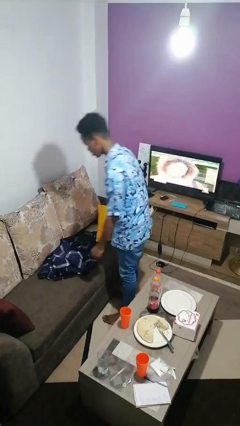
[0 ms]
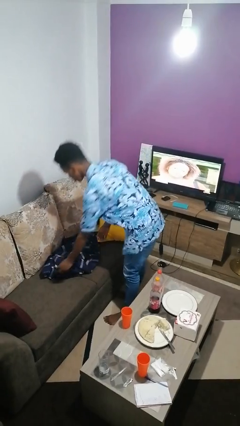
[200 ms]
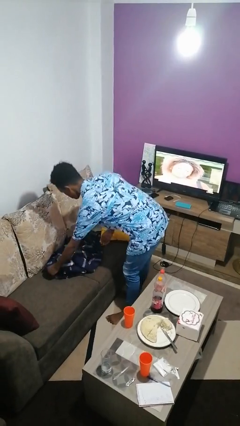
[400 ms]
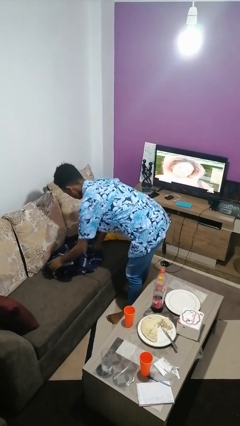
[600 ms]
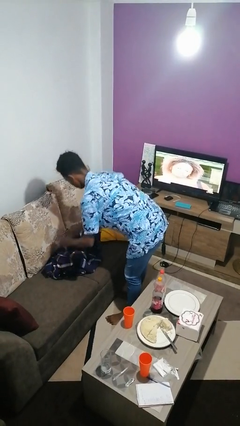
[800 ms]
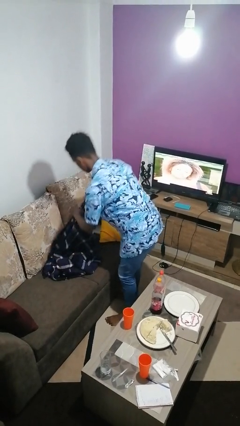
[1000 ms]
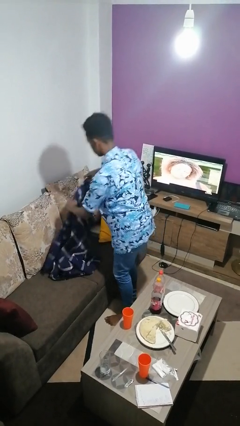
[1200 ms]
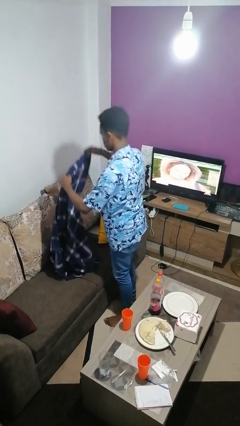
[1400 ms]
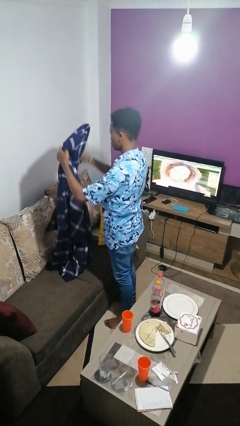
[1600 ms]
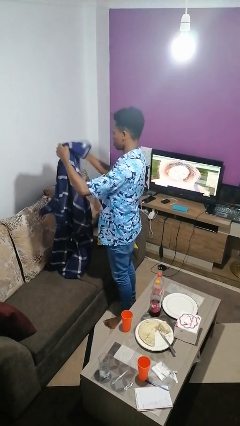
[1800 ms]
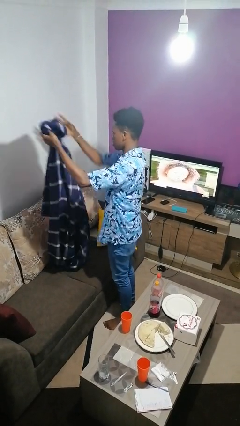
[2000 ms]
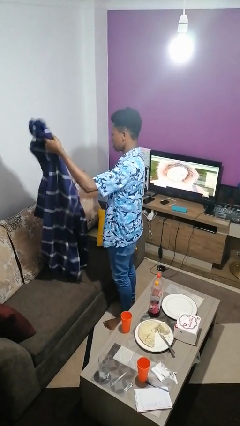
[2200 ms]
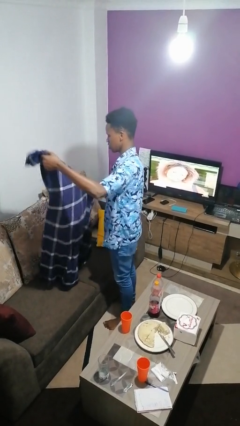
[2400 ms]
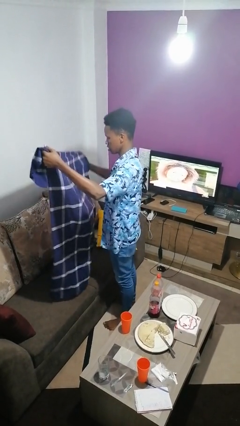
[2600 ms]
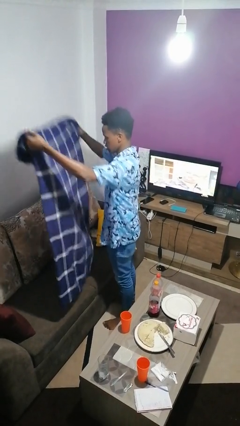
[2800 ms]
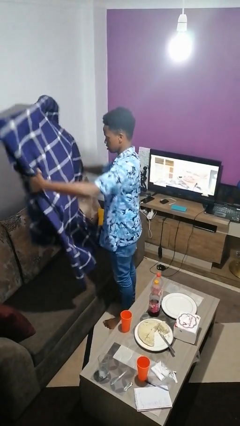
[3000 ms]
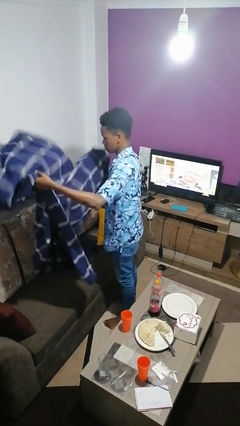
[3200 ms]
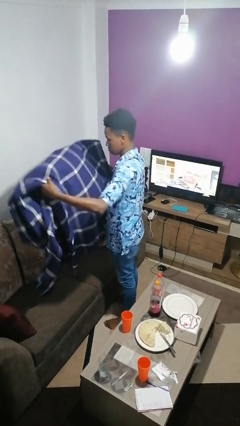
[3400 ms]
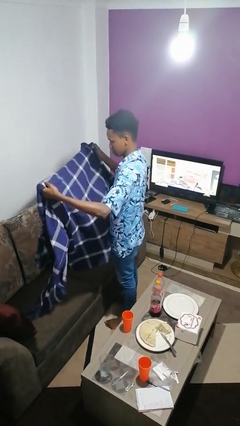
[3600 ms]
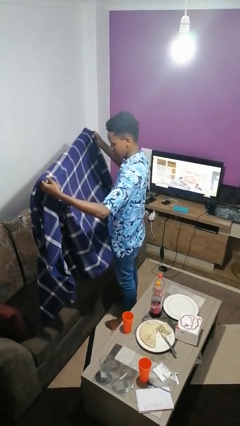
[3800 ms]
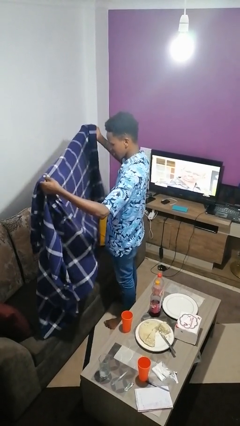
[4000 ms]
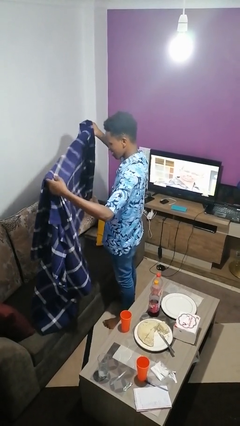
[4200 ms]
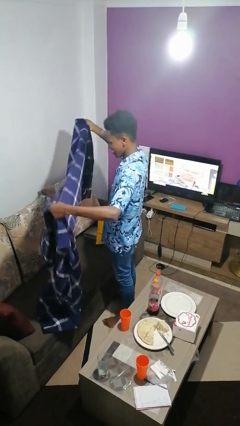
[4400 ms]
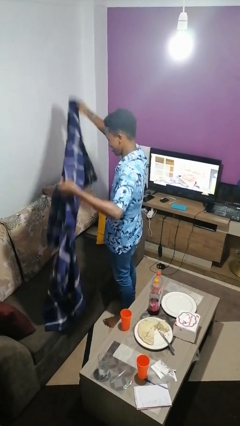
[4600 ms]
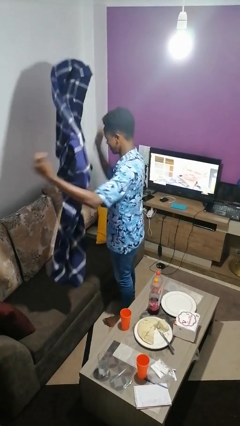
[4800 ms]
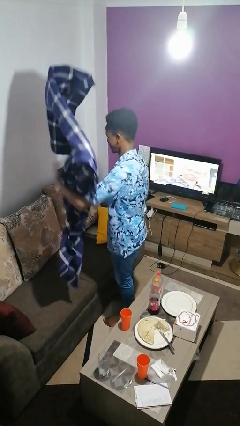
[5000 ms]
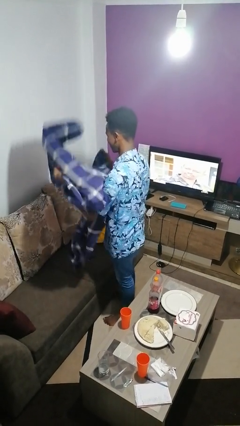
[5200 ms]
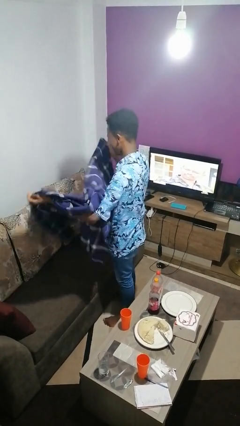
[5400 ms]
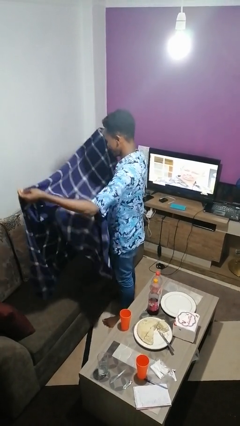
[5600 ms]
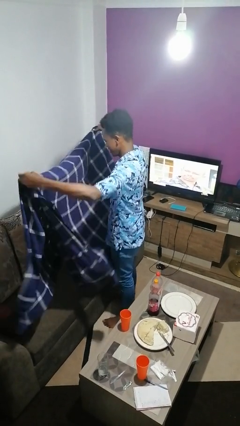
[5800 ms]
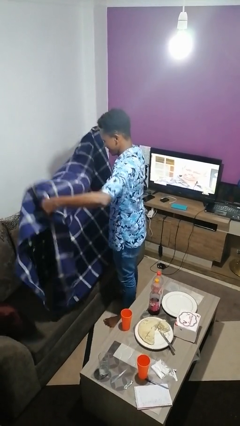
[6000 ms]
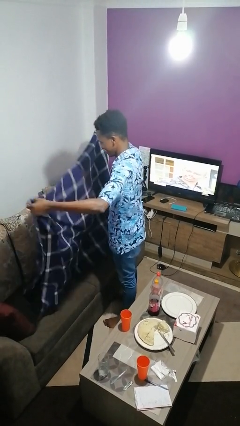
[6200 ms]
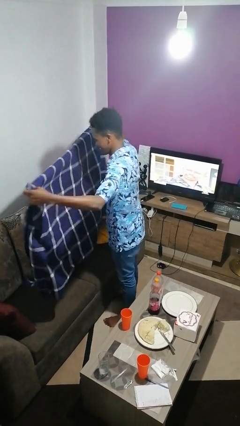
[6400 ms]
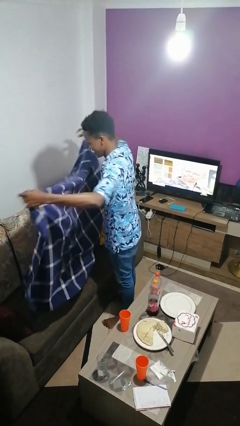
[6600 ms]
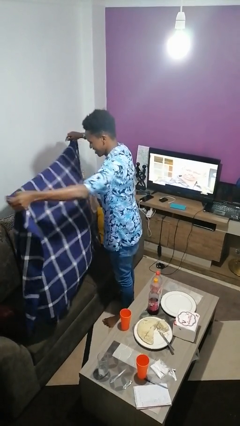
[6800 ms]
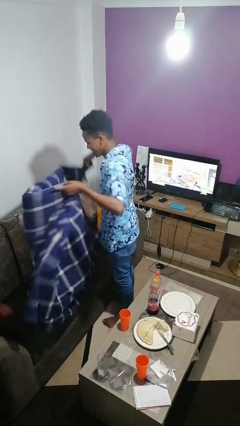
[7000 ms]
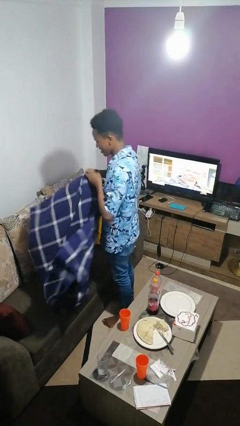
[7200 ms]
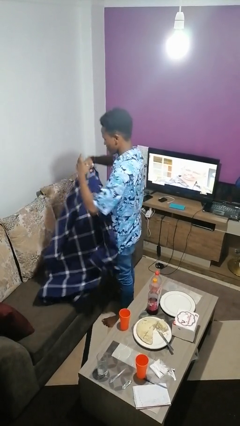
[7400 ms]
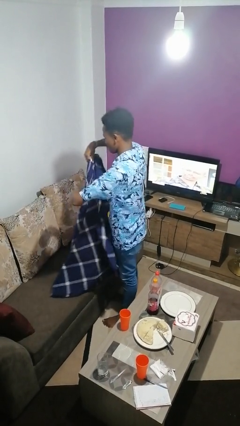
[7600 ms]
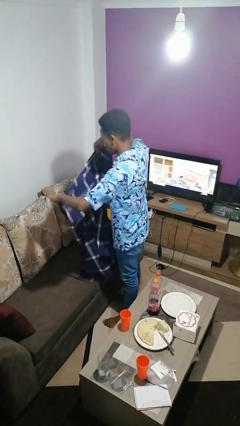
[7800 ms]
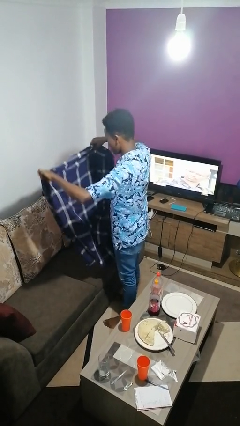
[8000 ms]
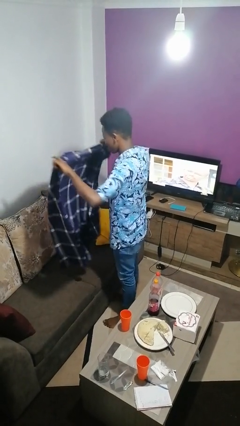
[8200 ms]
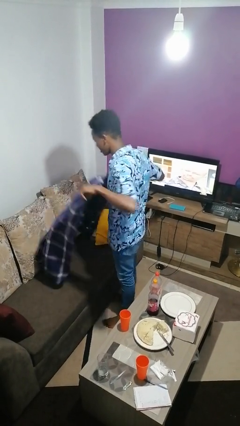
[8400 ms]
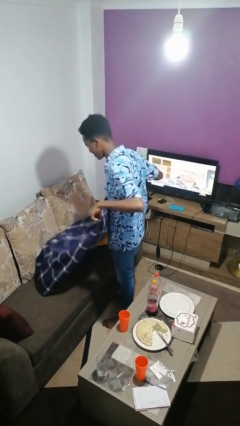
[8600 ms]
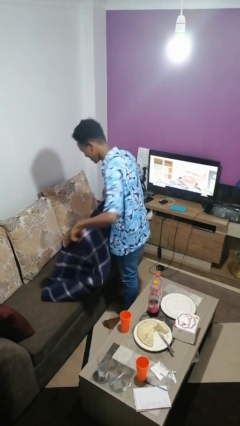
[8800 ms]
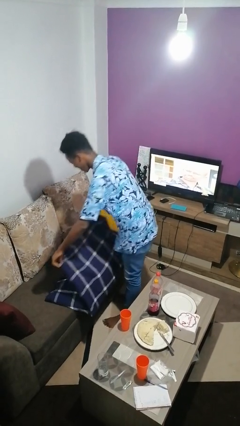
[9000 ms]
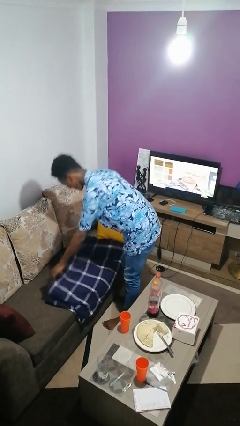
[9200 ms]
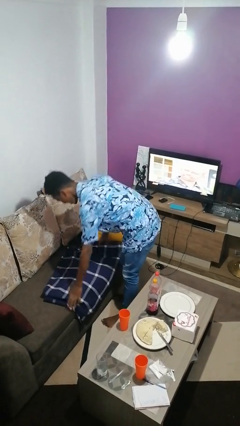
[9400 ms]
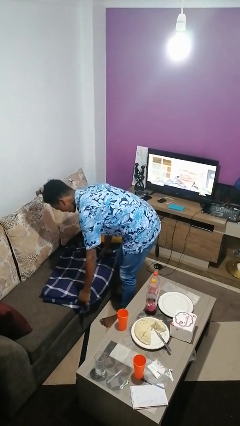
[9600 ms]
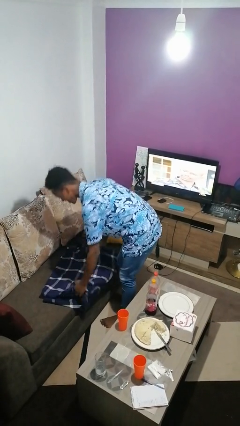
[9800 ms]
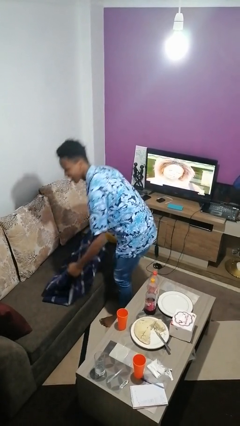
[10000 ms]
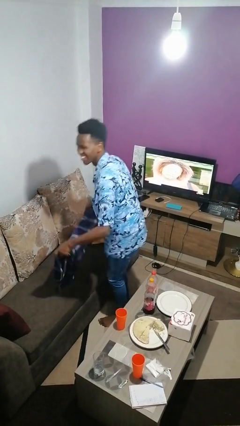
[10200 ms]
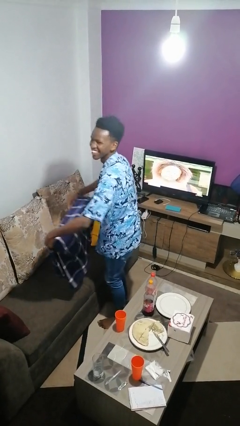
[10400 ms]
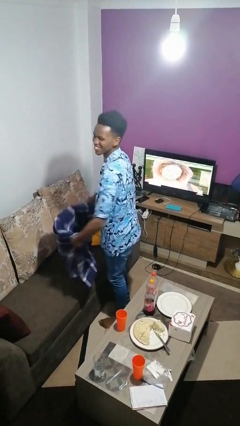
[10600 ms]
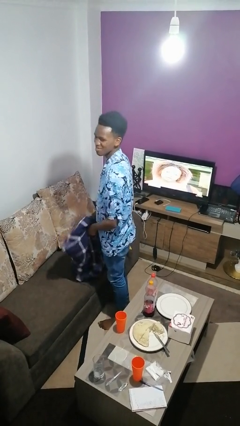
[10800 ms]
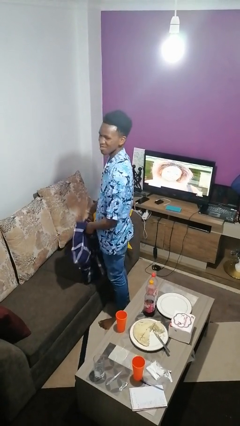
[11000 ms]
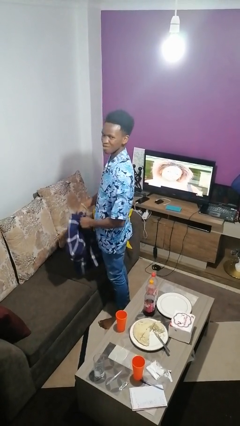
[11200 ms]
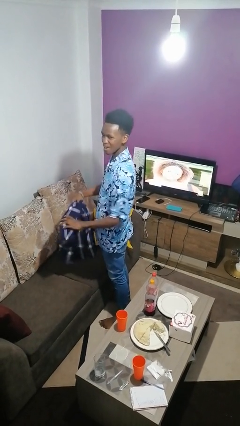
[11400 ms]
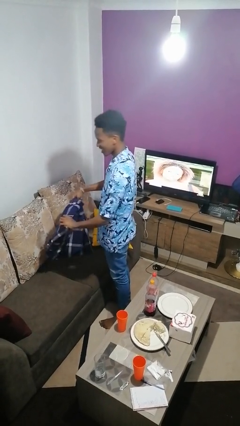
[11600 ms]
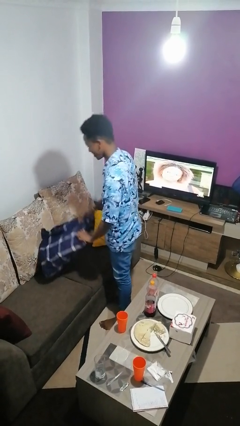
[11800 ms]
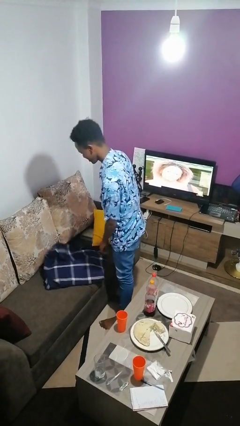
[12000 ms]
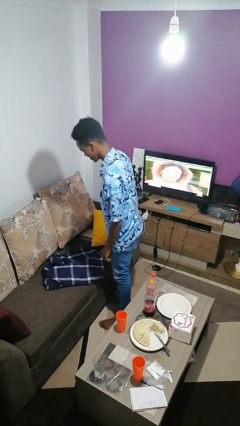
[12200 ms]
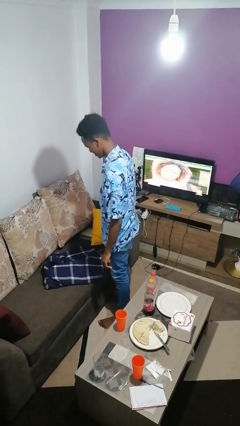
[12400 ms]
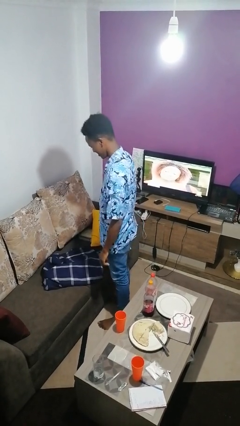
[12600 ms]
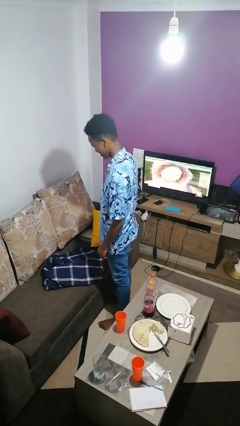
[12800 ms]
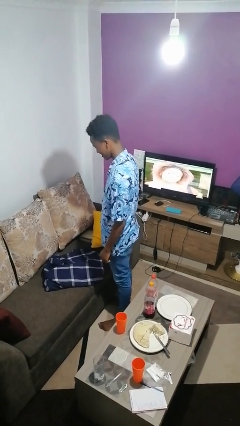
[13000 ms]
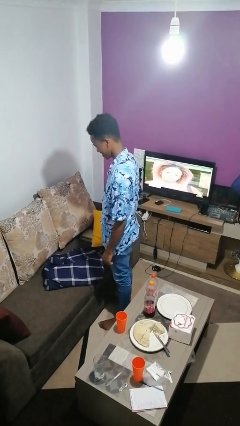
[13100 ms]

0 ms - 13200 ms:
person folds blanket

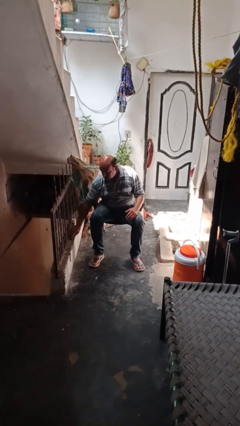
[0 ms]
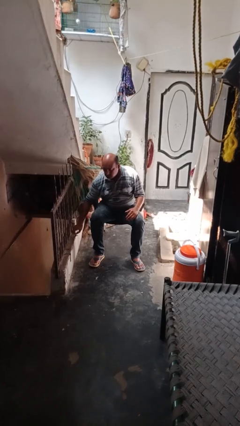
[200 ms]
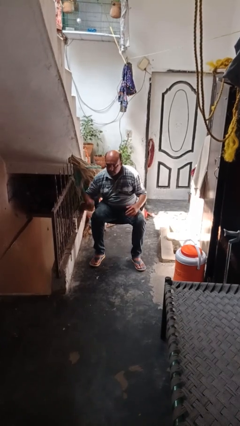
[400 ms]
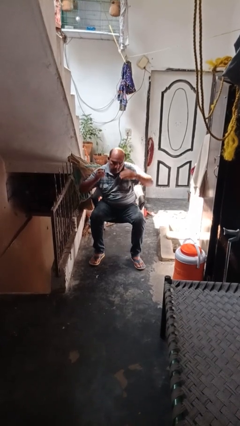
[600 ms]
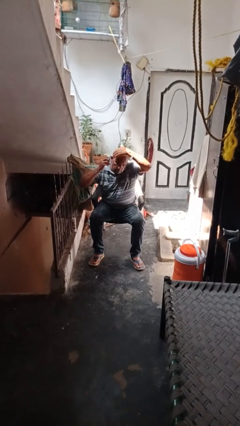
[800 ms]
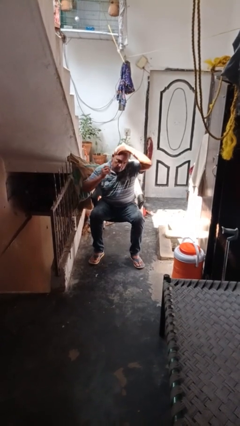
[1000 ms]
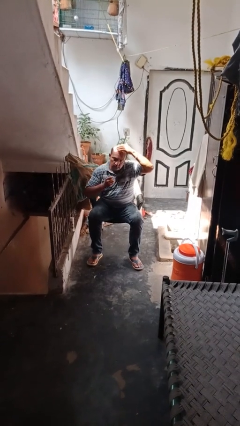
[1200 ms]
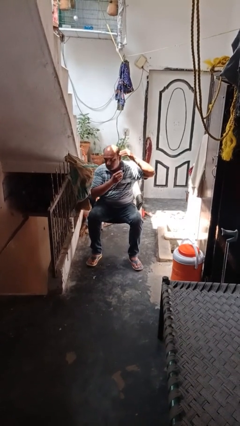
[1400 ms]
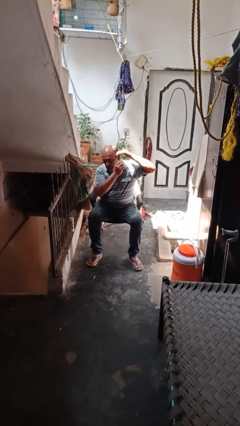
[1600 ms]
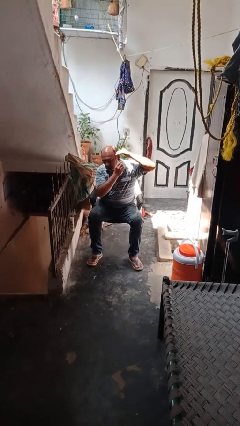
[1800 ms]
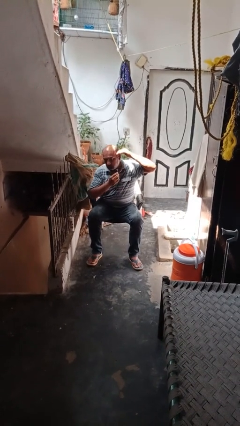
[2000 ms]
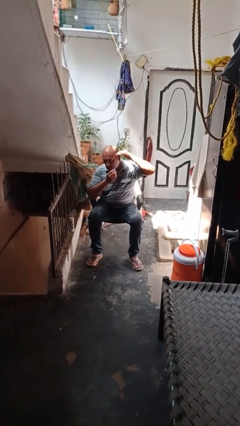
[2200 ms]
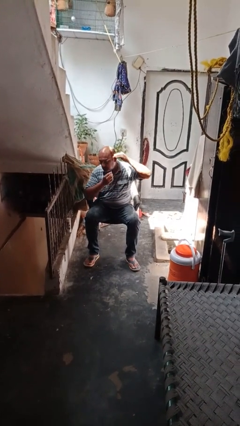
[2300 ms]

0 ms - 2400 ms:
person shaves face

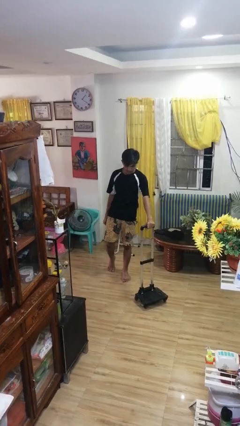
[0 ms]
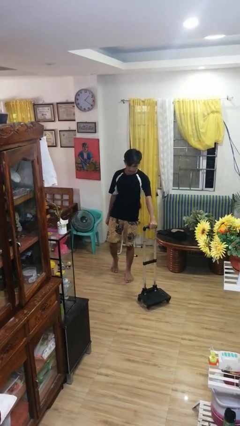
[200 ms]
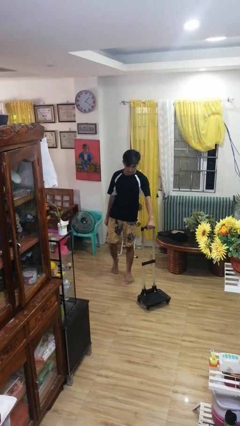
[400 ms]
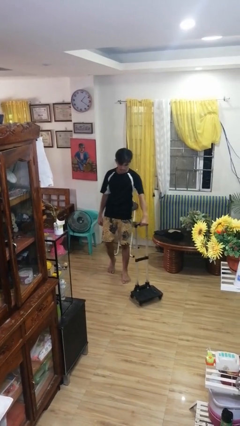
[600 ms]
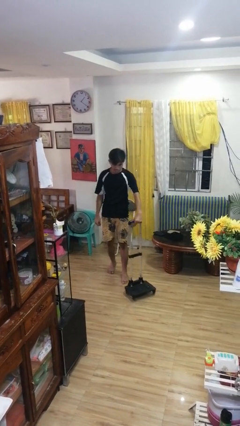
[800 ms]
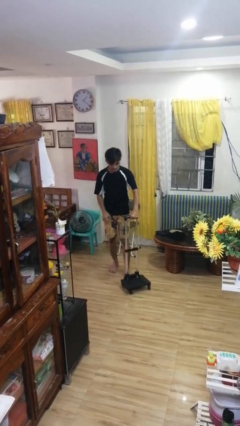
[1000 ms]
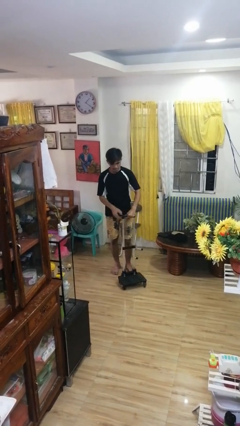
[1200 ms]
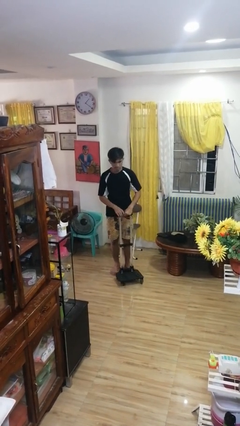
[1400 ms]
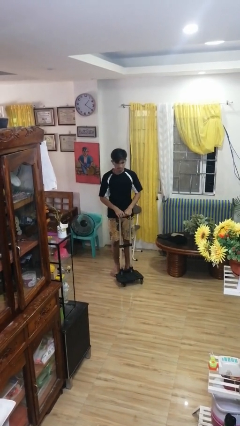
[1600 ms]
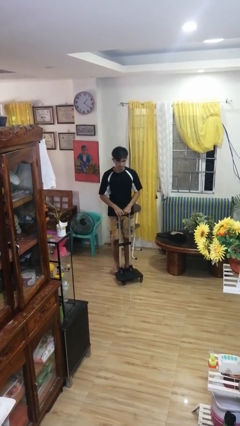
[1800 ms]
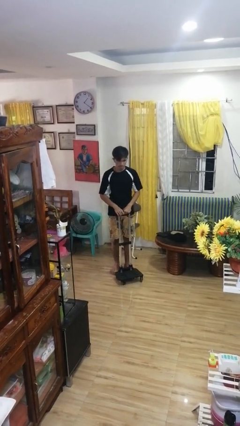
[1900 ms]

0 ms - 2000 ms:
person pulls wheeled cart

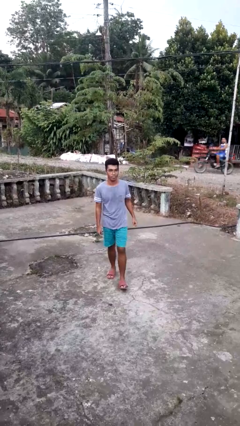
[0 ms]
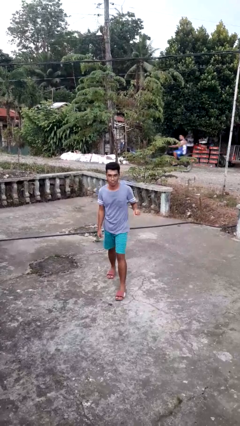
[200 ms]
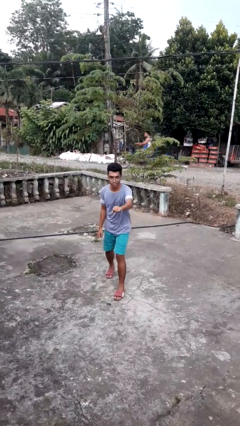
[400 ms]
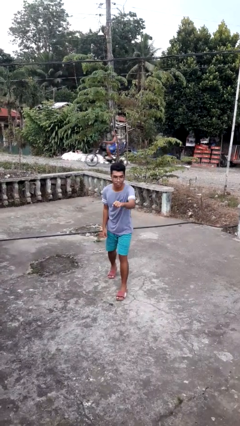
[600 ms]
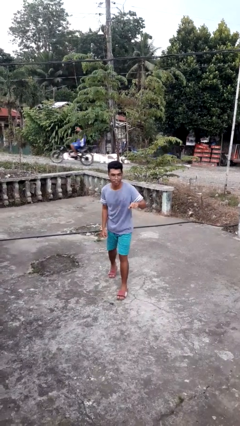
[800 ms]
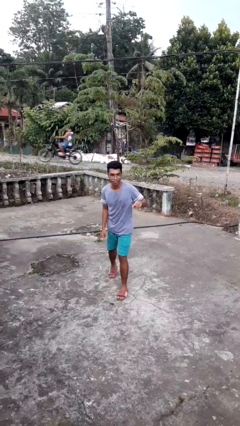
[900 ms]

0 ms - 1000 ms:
person punches
